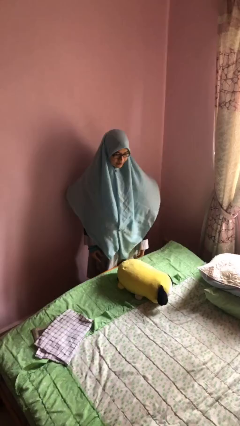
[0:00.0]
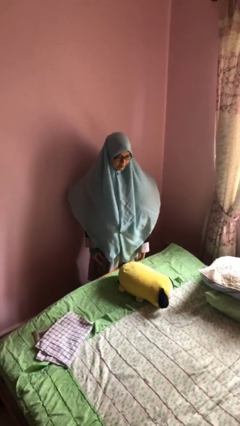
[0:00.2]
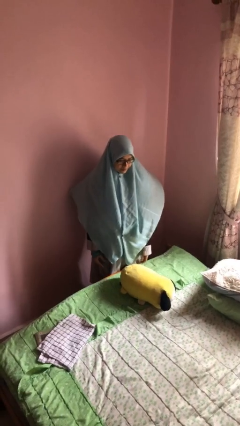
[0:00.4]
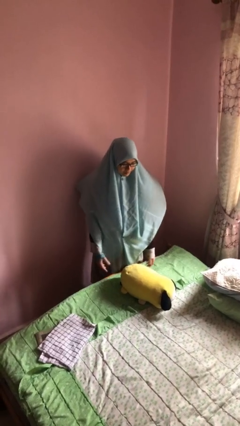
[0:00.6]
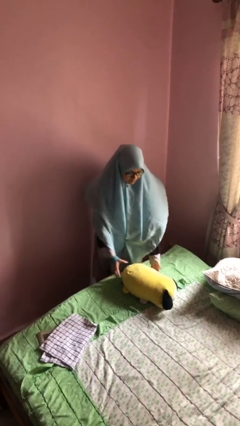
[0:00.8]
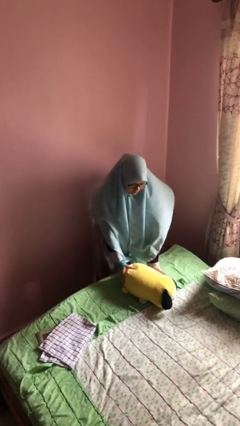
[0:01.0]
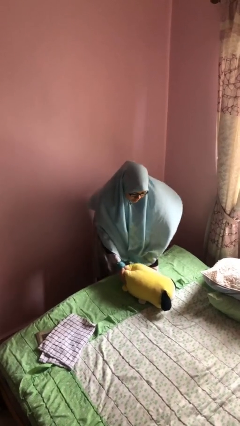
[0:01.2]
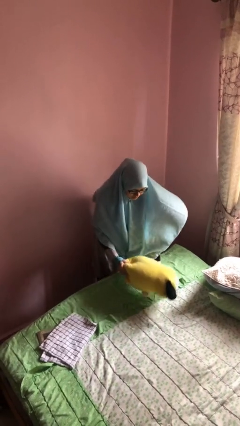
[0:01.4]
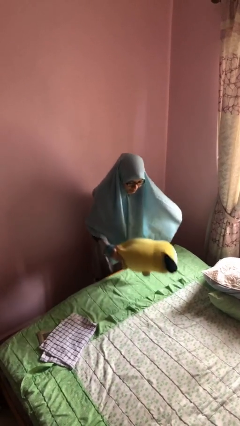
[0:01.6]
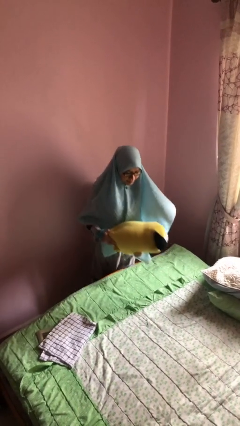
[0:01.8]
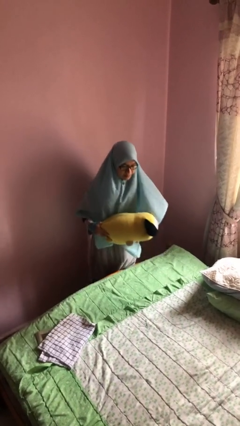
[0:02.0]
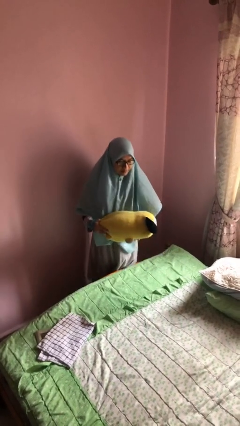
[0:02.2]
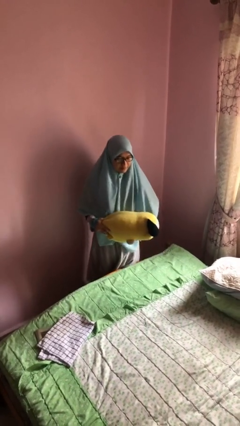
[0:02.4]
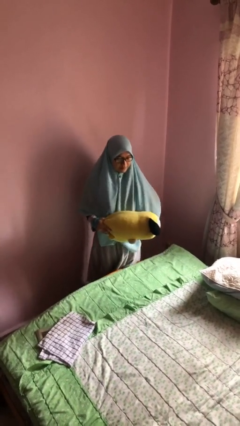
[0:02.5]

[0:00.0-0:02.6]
person picks up object from bed

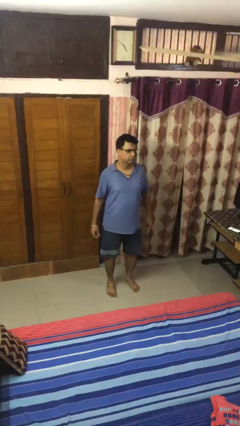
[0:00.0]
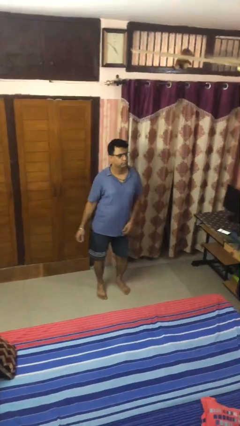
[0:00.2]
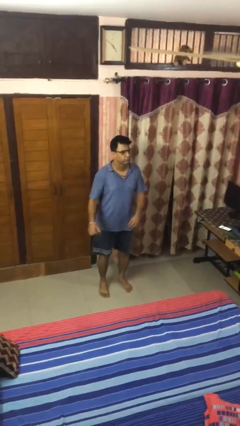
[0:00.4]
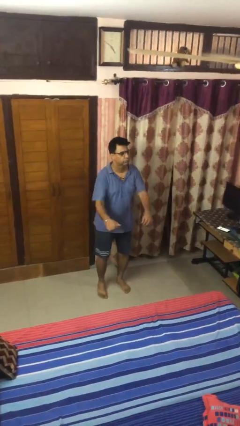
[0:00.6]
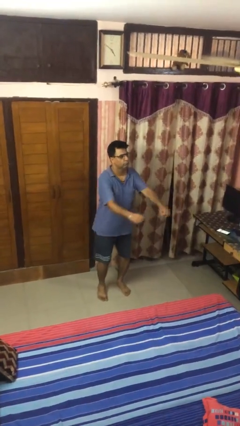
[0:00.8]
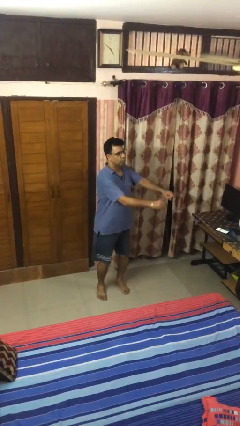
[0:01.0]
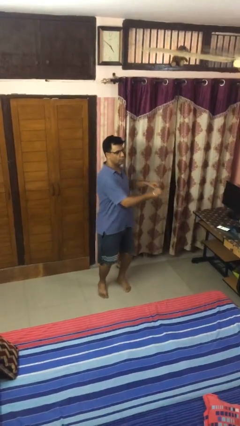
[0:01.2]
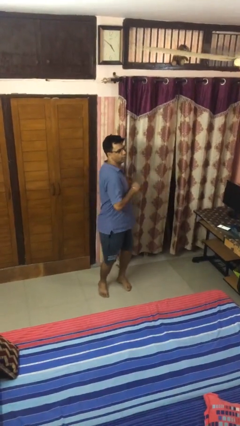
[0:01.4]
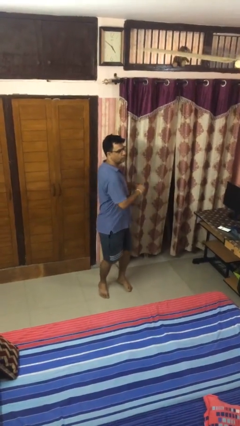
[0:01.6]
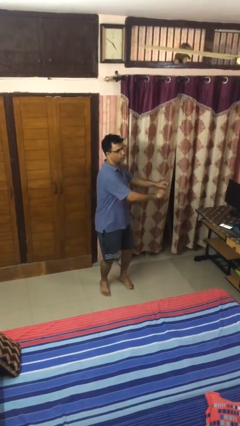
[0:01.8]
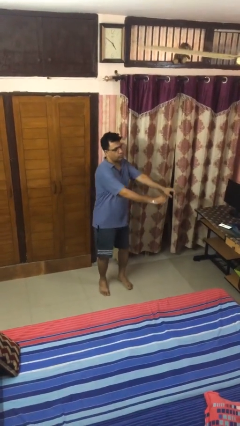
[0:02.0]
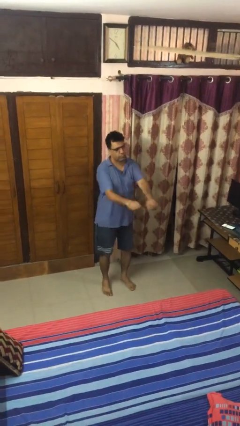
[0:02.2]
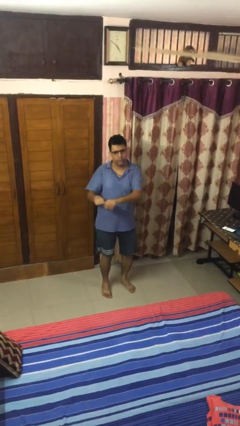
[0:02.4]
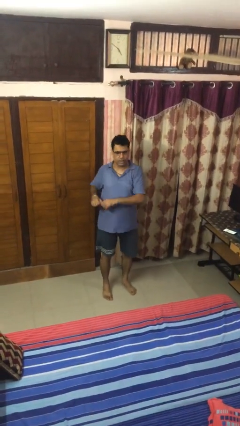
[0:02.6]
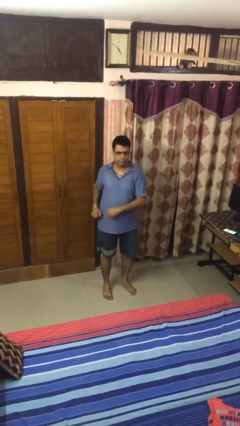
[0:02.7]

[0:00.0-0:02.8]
person dances in place

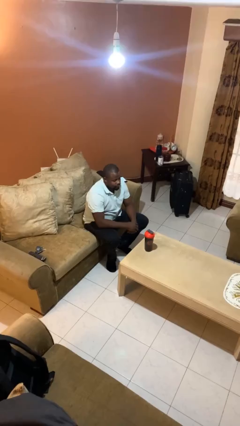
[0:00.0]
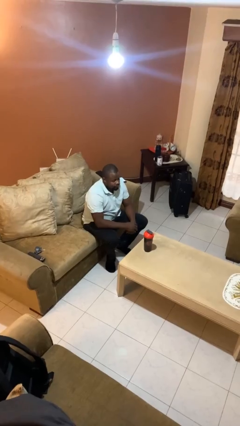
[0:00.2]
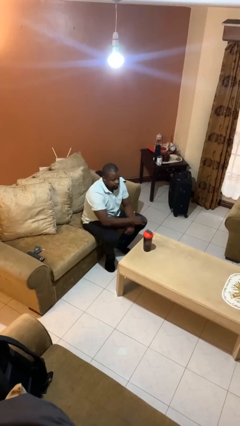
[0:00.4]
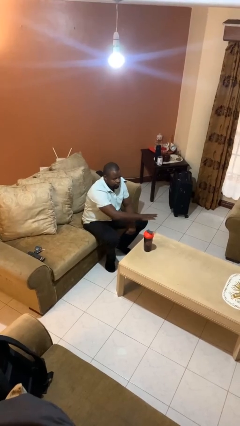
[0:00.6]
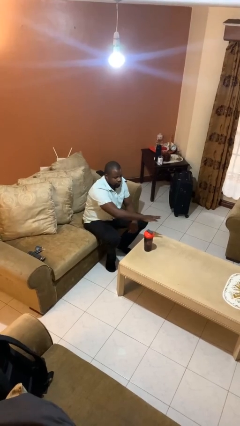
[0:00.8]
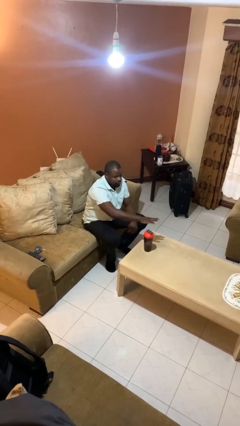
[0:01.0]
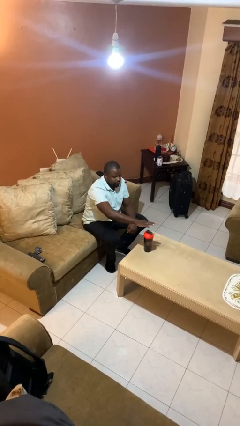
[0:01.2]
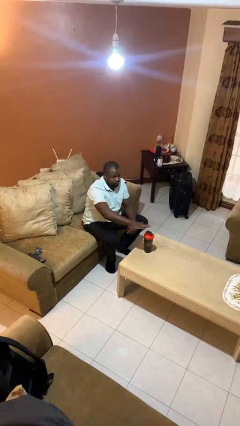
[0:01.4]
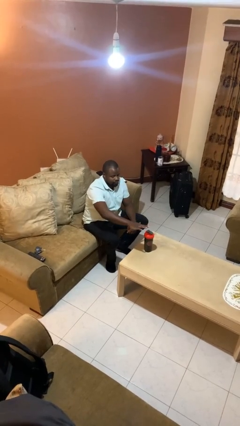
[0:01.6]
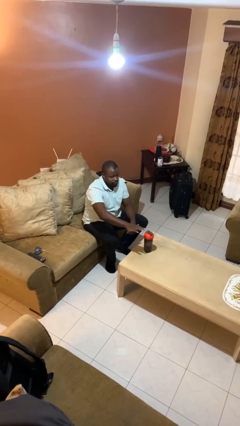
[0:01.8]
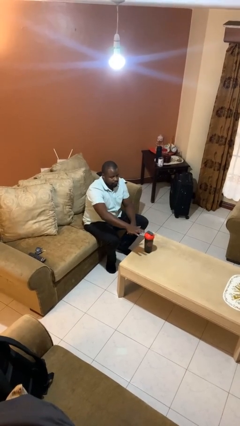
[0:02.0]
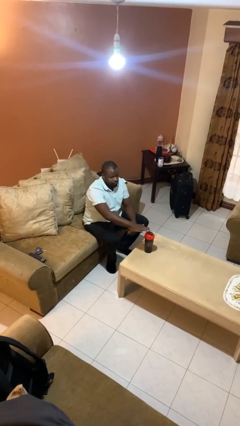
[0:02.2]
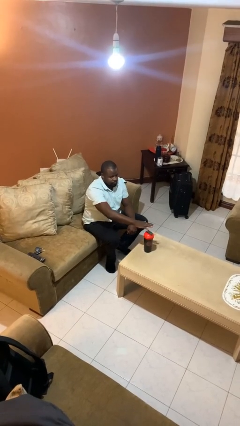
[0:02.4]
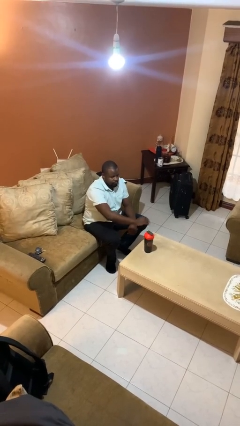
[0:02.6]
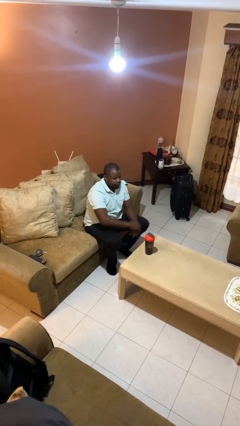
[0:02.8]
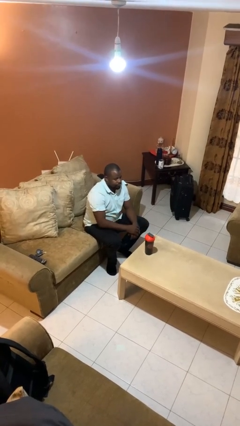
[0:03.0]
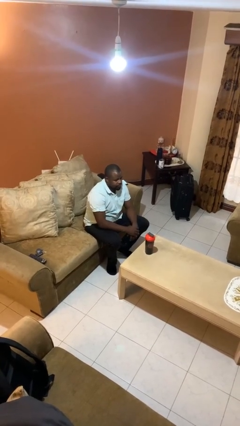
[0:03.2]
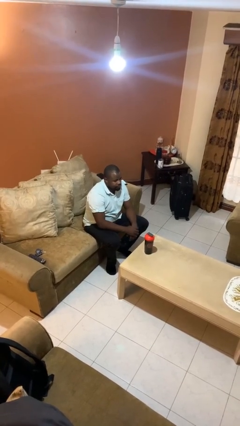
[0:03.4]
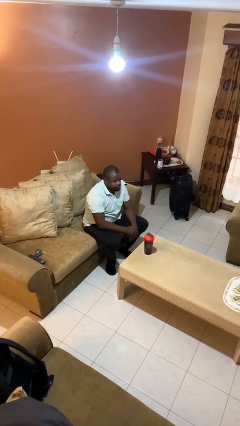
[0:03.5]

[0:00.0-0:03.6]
person waves hand over object

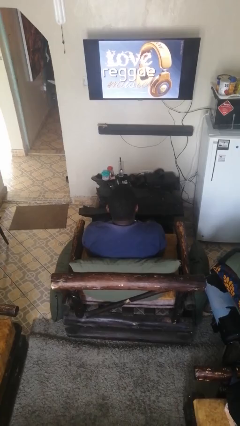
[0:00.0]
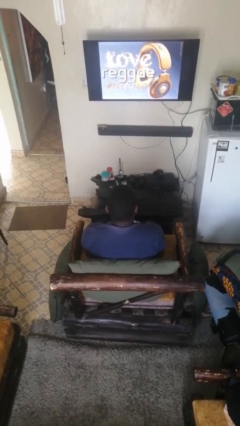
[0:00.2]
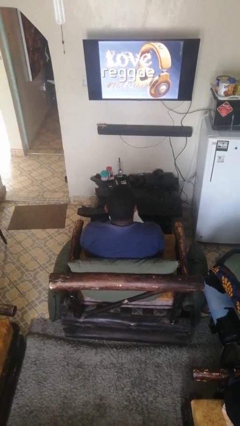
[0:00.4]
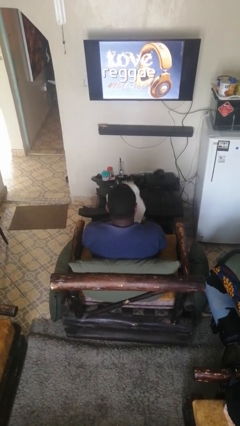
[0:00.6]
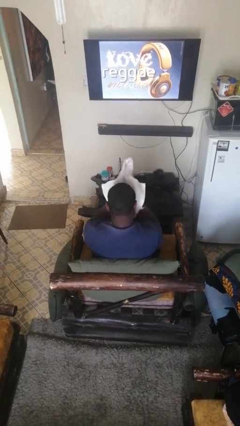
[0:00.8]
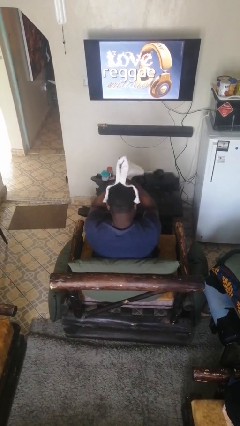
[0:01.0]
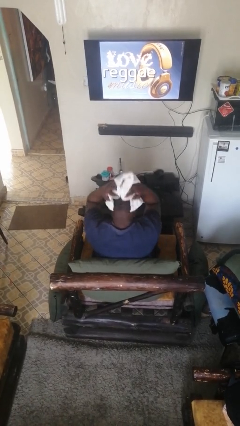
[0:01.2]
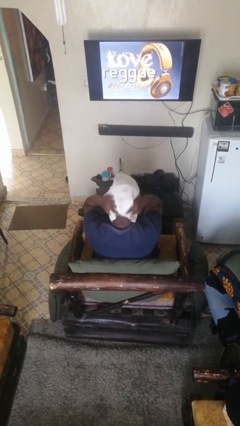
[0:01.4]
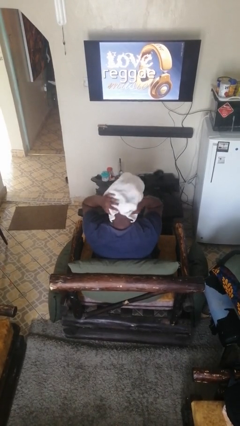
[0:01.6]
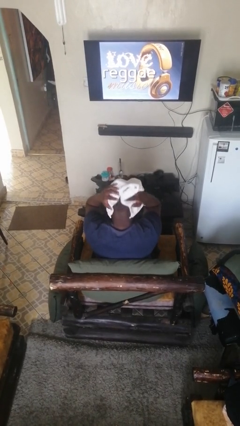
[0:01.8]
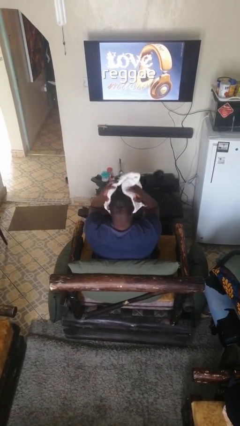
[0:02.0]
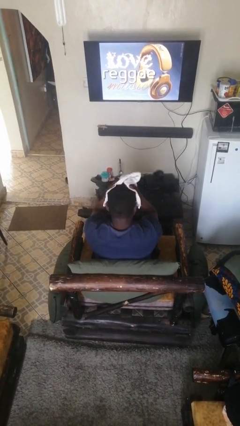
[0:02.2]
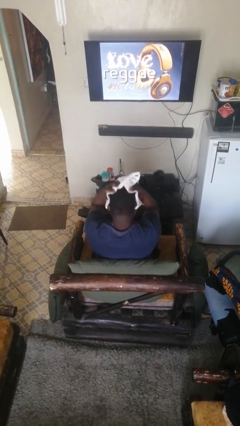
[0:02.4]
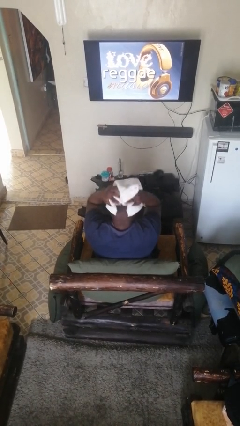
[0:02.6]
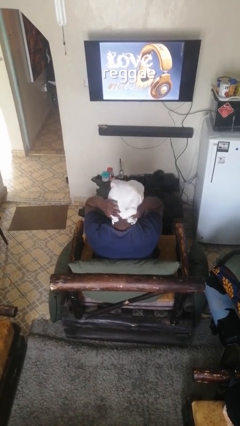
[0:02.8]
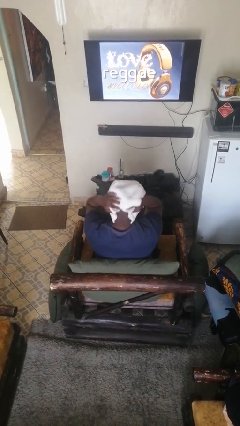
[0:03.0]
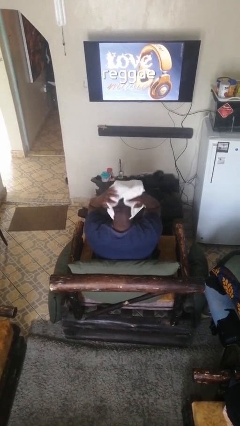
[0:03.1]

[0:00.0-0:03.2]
person dries hair with towel

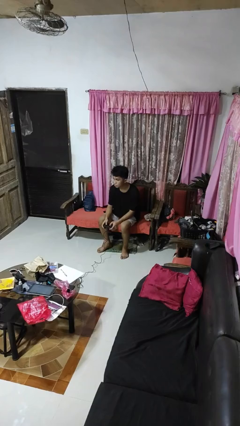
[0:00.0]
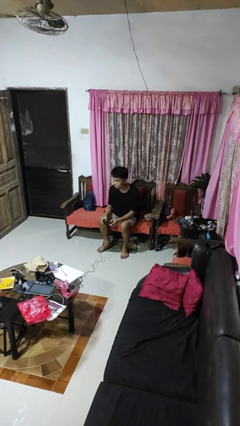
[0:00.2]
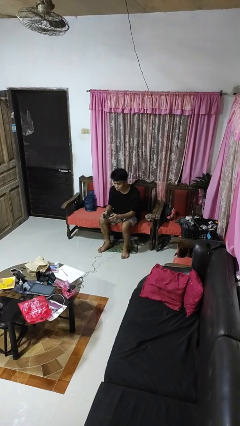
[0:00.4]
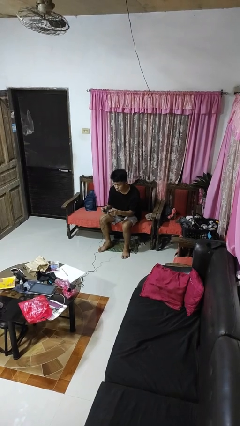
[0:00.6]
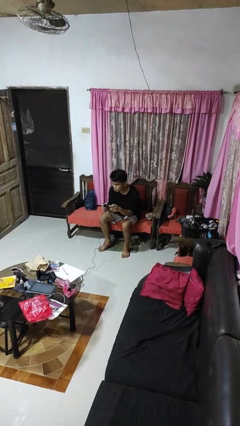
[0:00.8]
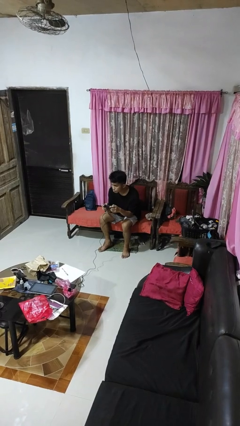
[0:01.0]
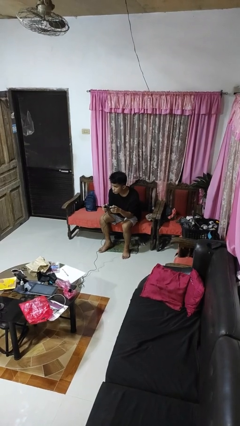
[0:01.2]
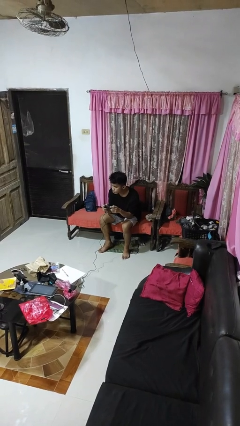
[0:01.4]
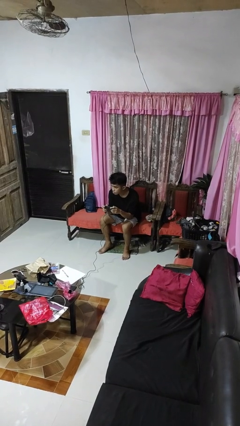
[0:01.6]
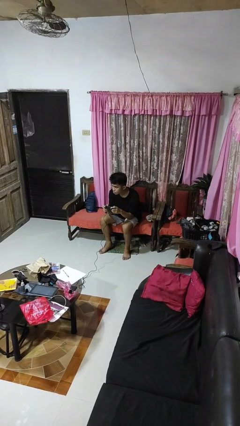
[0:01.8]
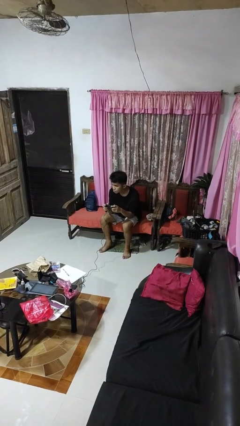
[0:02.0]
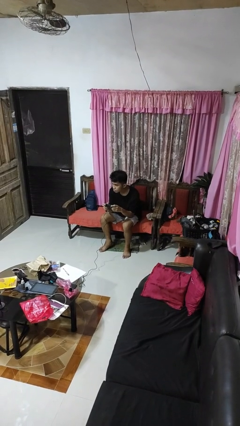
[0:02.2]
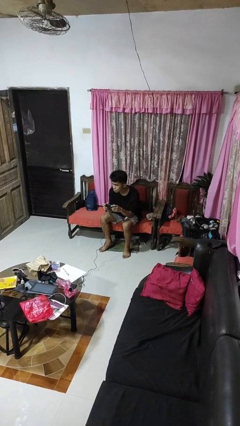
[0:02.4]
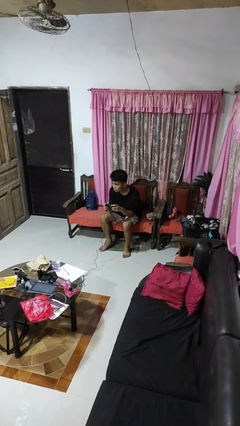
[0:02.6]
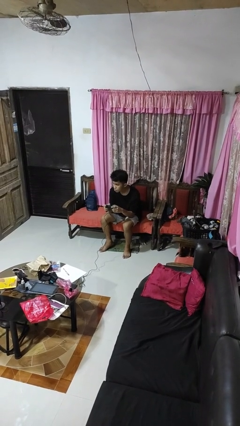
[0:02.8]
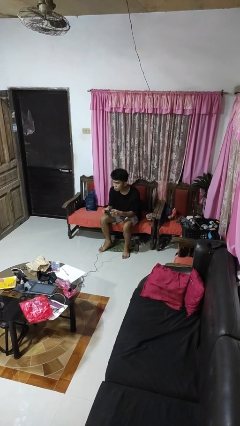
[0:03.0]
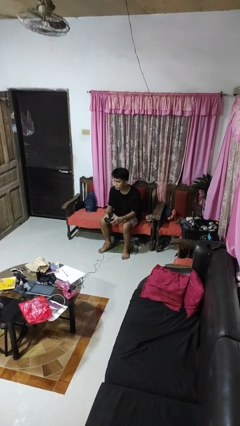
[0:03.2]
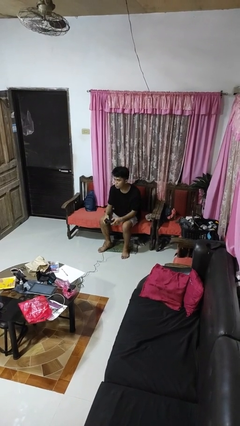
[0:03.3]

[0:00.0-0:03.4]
person interacts with handheld game

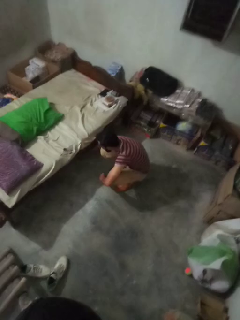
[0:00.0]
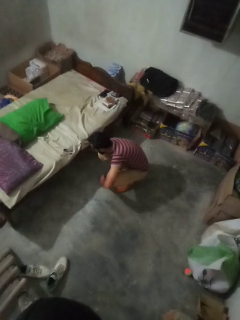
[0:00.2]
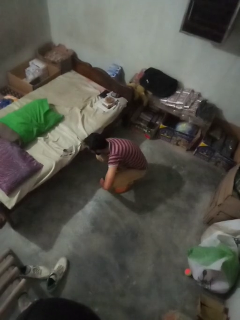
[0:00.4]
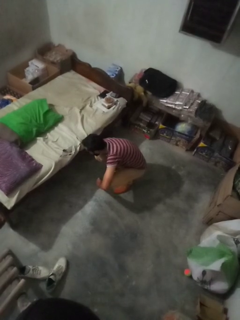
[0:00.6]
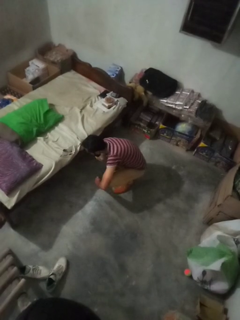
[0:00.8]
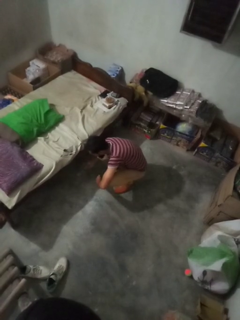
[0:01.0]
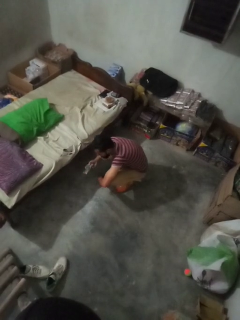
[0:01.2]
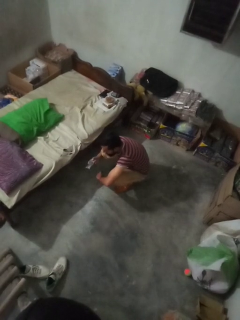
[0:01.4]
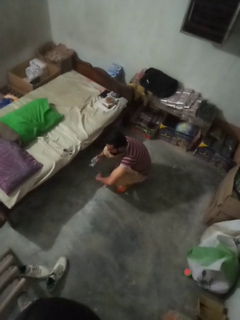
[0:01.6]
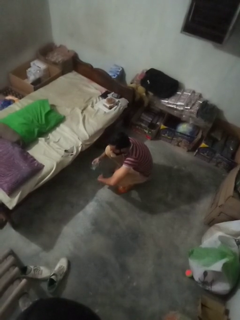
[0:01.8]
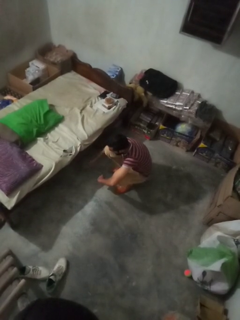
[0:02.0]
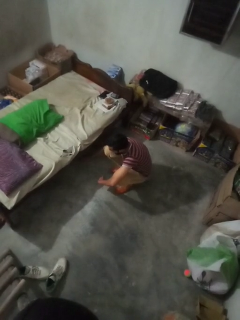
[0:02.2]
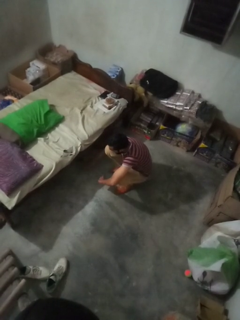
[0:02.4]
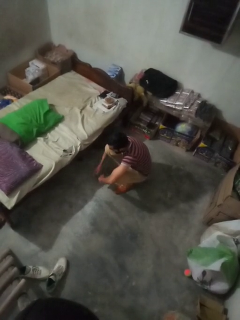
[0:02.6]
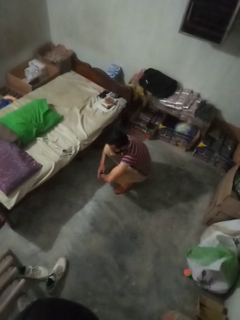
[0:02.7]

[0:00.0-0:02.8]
person searches under couch
